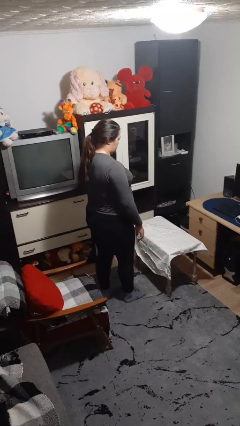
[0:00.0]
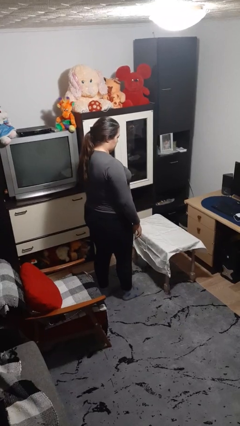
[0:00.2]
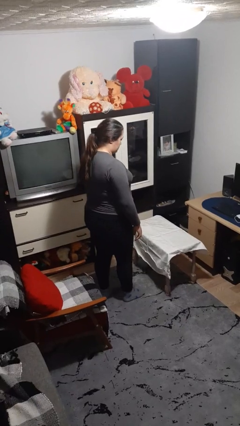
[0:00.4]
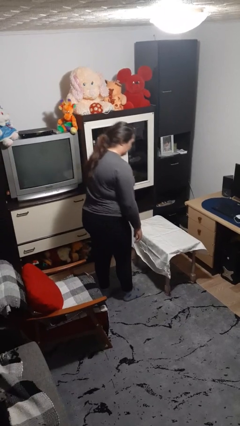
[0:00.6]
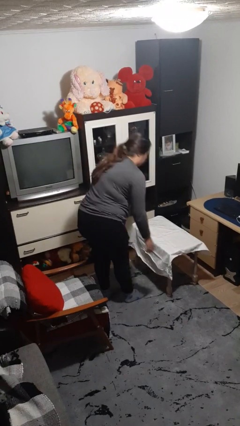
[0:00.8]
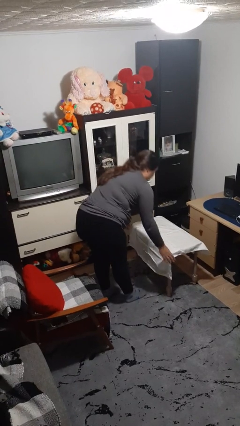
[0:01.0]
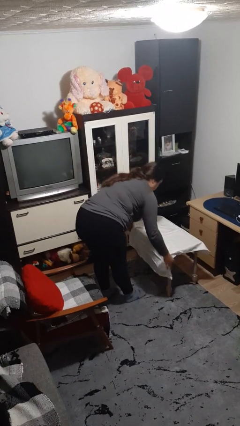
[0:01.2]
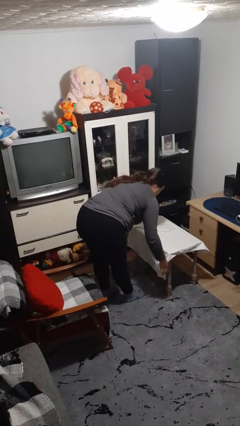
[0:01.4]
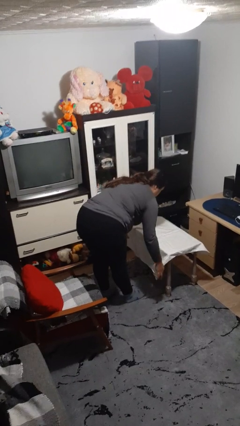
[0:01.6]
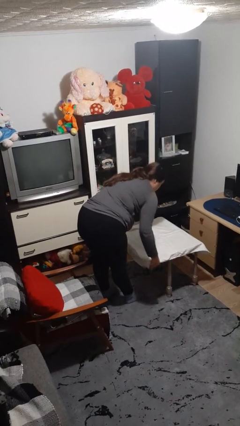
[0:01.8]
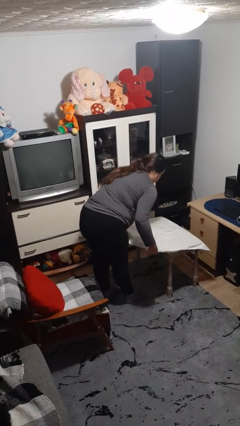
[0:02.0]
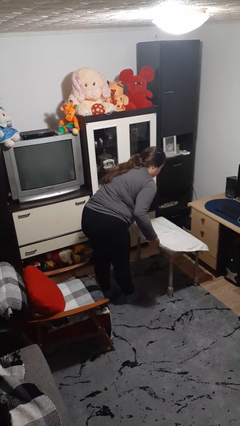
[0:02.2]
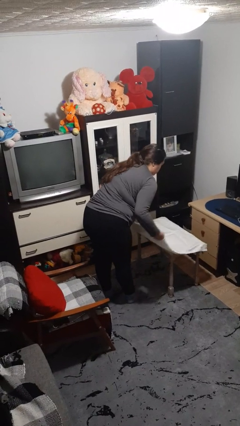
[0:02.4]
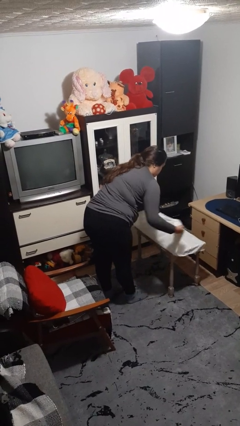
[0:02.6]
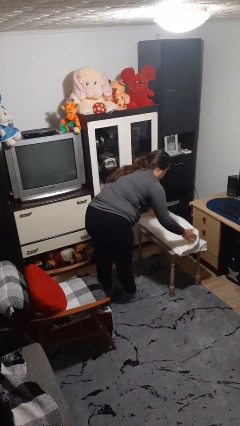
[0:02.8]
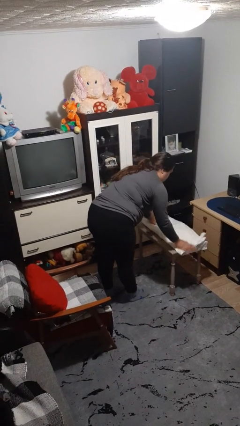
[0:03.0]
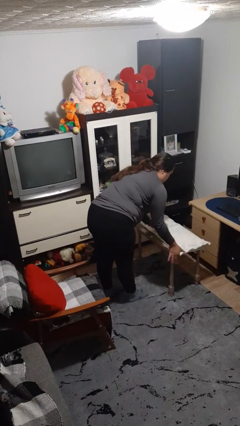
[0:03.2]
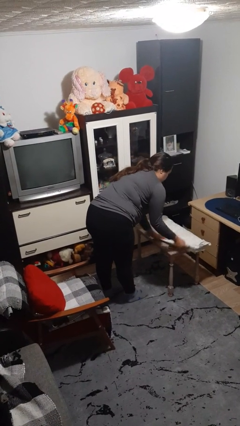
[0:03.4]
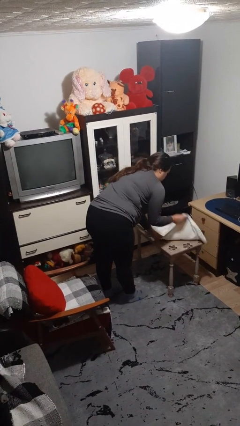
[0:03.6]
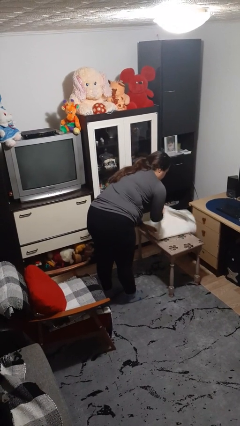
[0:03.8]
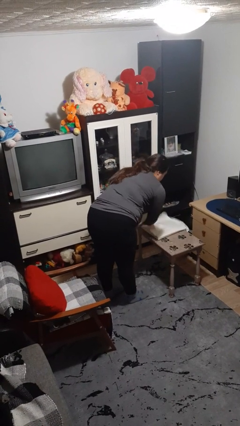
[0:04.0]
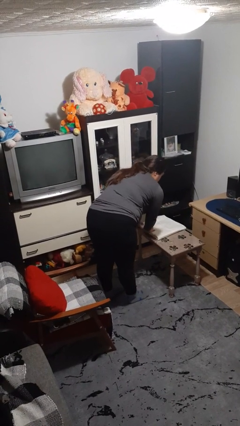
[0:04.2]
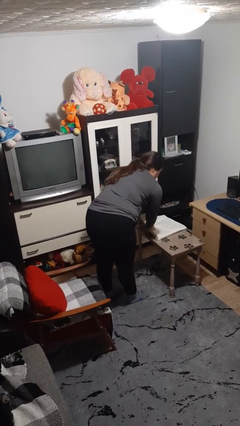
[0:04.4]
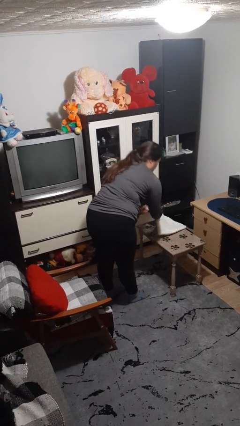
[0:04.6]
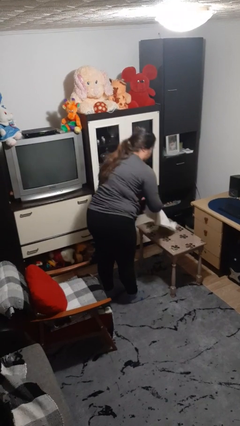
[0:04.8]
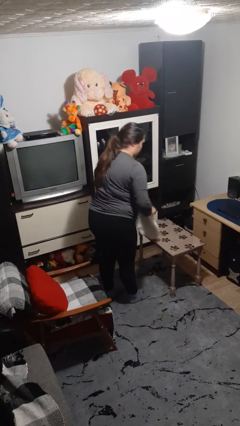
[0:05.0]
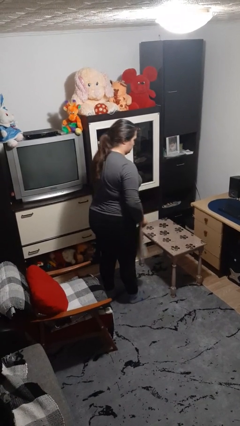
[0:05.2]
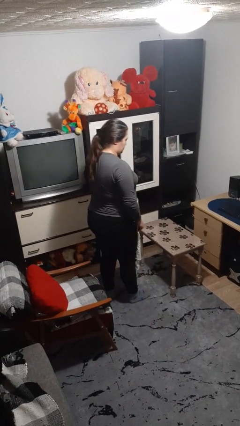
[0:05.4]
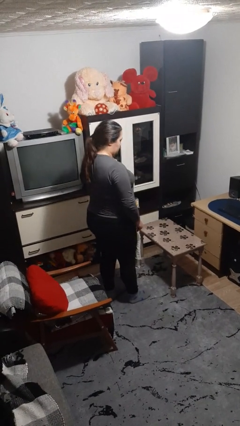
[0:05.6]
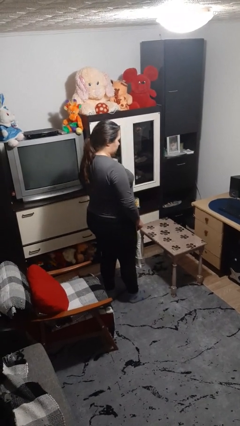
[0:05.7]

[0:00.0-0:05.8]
person folds tablecloth

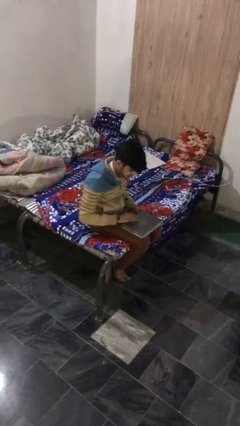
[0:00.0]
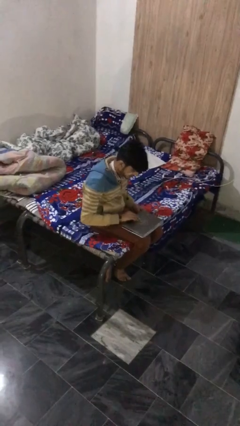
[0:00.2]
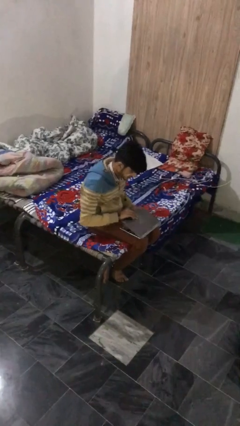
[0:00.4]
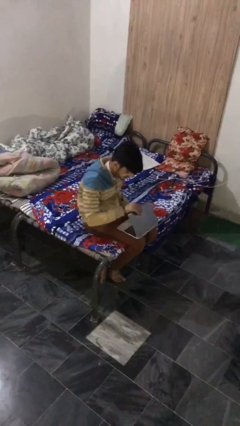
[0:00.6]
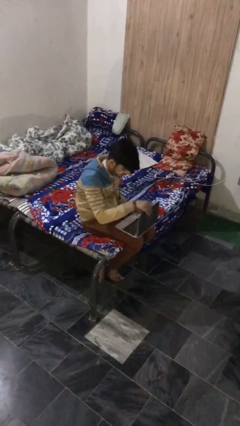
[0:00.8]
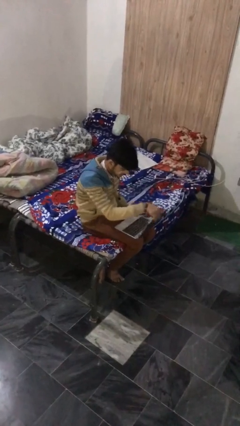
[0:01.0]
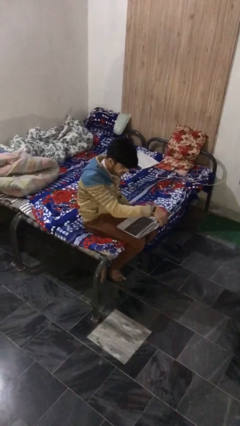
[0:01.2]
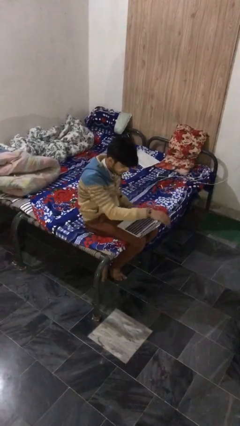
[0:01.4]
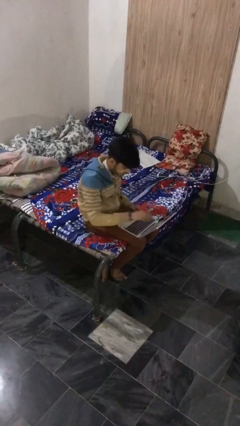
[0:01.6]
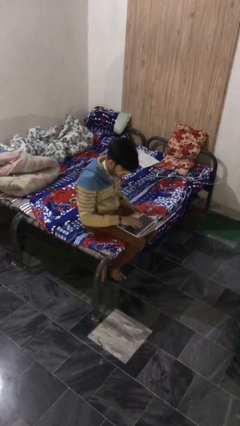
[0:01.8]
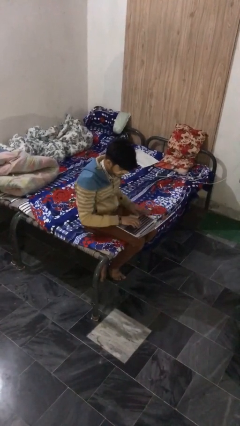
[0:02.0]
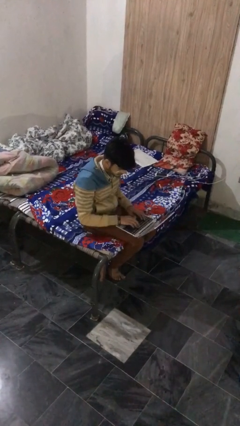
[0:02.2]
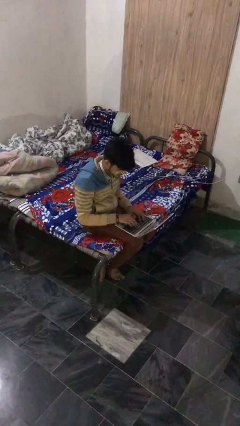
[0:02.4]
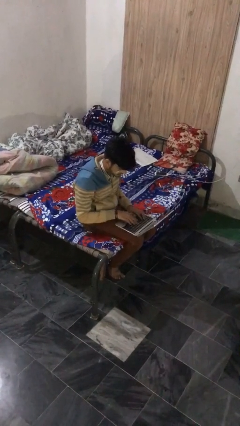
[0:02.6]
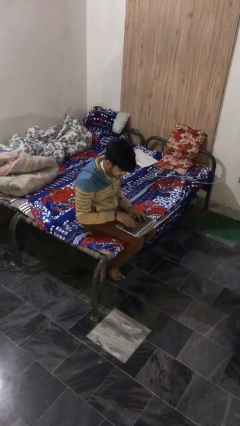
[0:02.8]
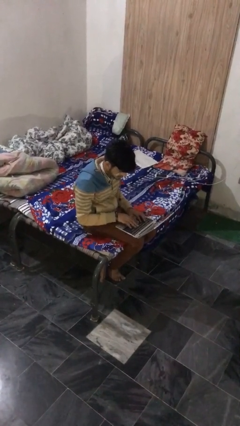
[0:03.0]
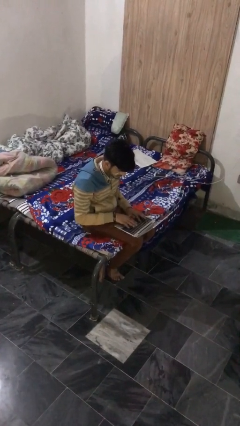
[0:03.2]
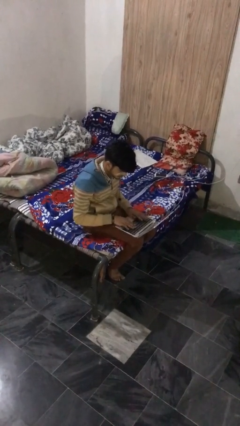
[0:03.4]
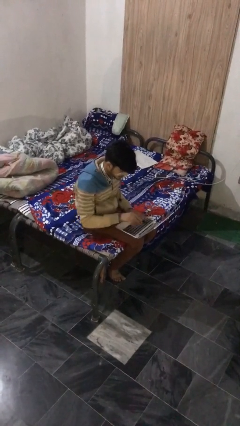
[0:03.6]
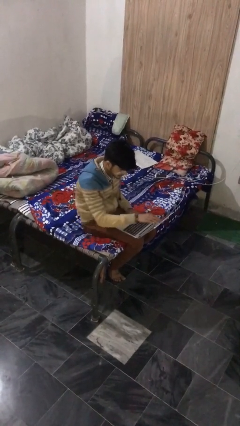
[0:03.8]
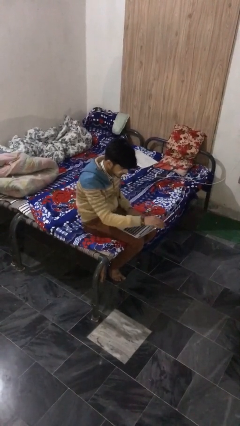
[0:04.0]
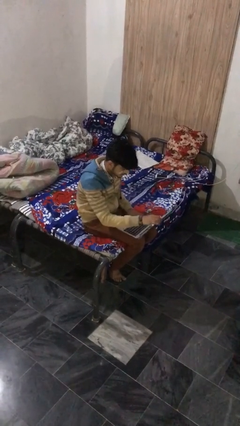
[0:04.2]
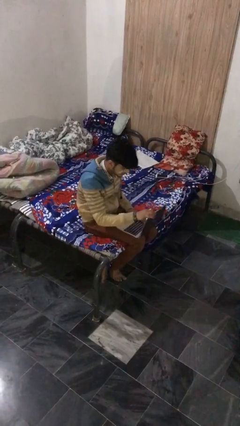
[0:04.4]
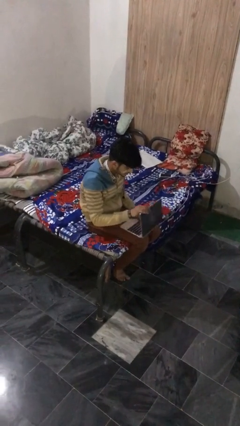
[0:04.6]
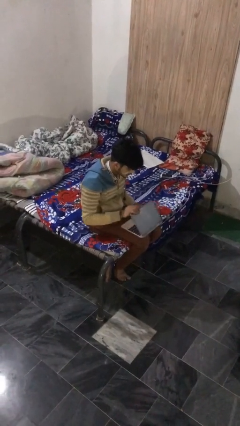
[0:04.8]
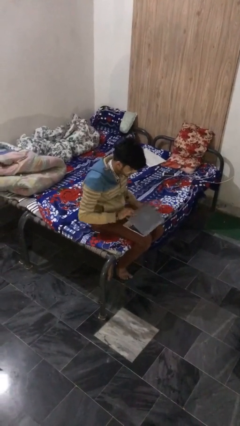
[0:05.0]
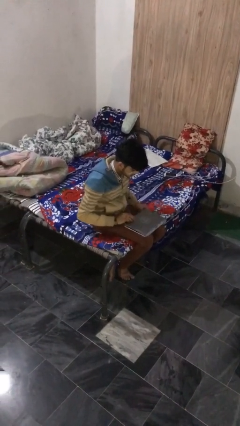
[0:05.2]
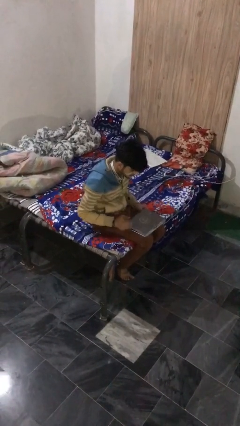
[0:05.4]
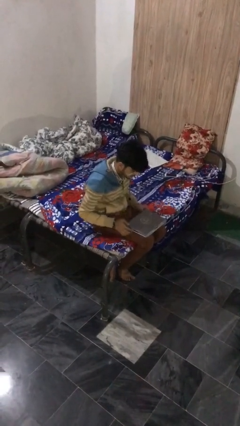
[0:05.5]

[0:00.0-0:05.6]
person interacts with laptop

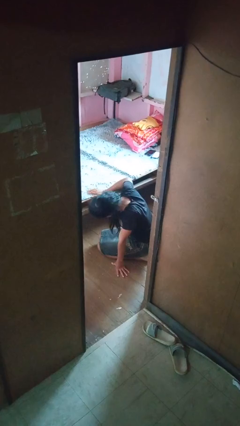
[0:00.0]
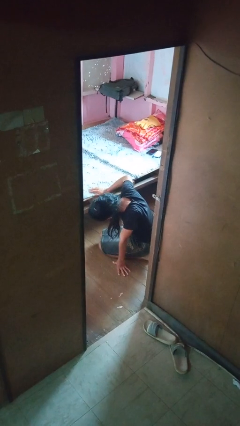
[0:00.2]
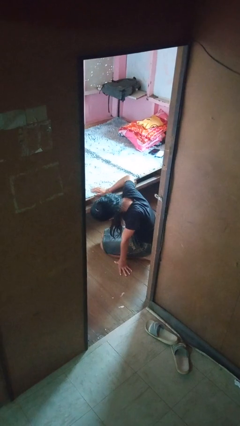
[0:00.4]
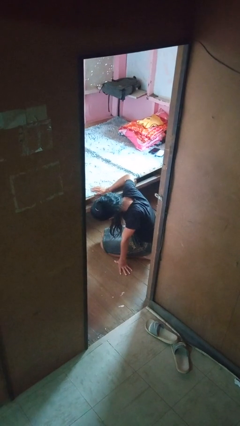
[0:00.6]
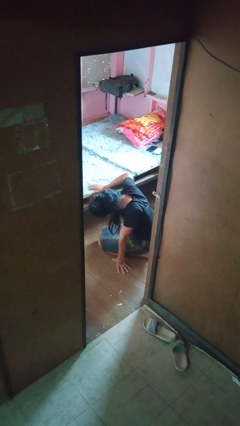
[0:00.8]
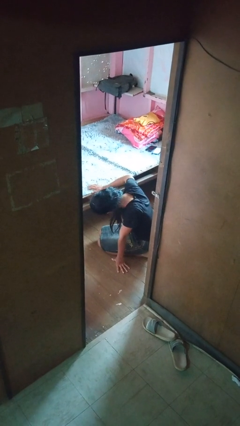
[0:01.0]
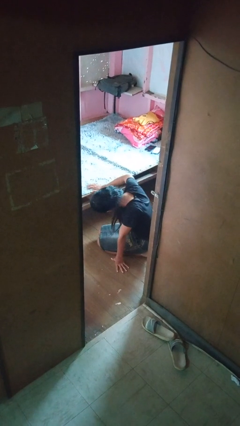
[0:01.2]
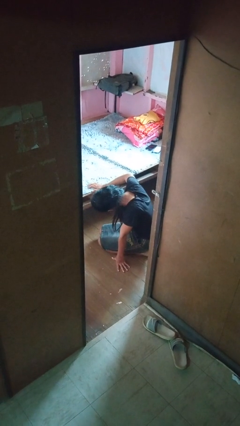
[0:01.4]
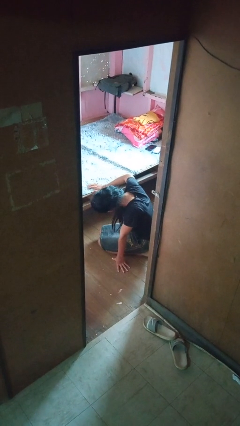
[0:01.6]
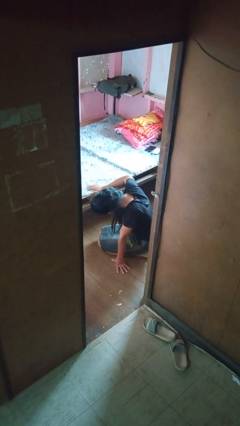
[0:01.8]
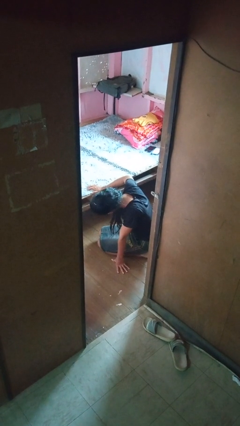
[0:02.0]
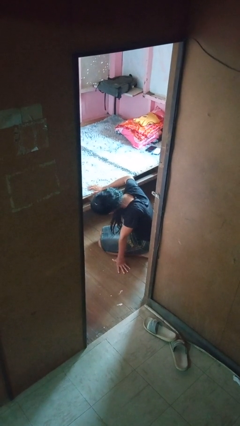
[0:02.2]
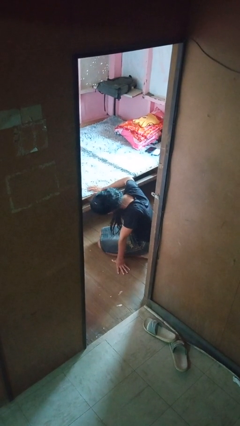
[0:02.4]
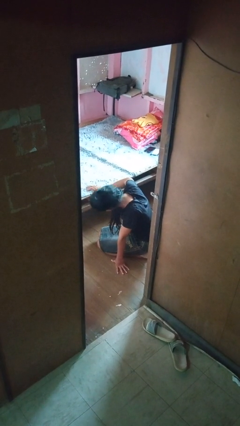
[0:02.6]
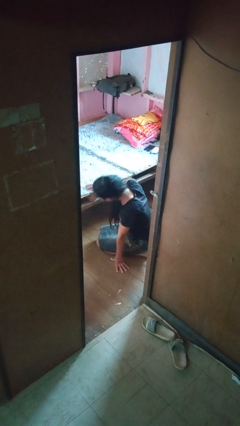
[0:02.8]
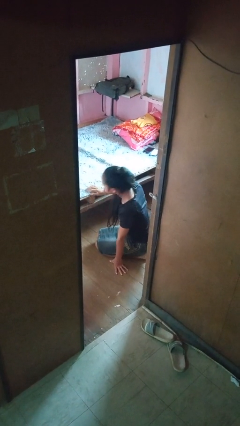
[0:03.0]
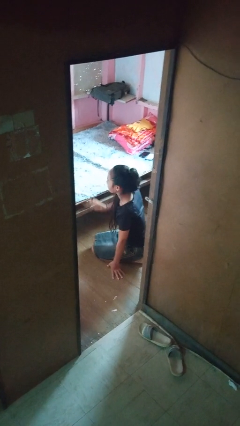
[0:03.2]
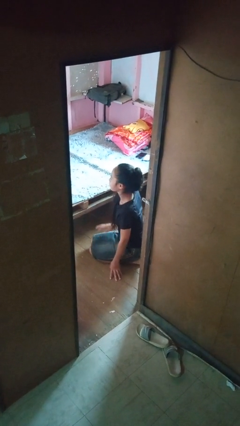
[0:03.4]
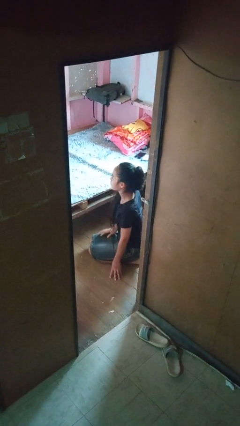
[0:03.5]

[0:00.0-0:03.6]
person searches under bed

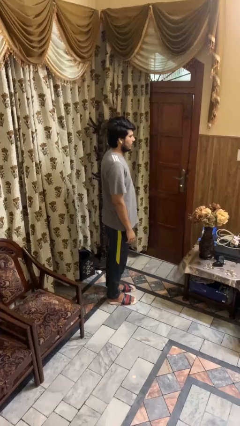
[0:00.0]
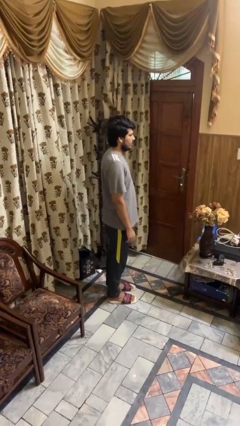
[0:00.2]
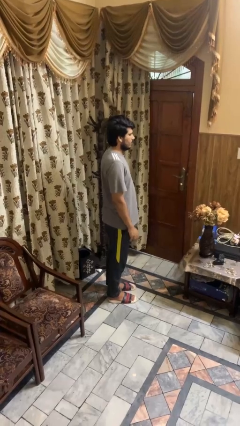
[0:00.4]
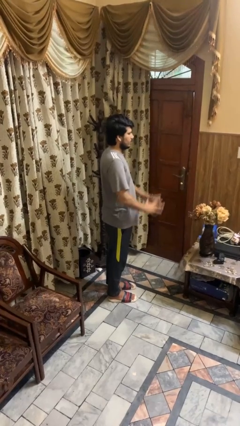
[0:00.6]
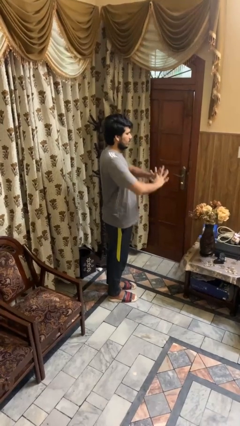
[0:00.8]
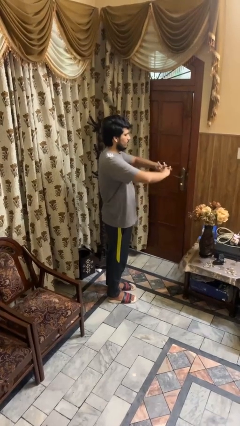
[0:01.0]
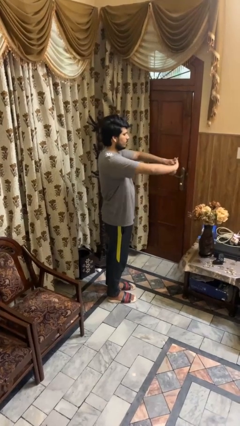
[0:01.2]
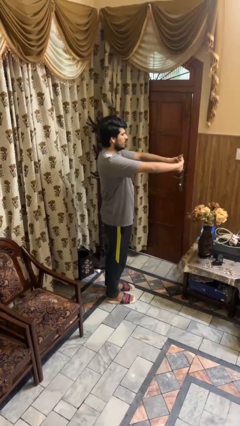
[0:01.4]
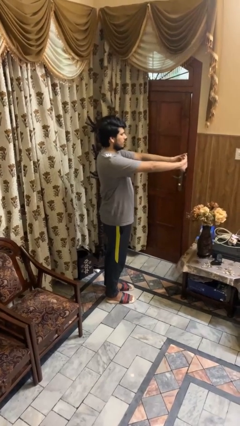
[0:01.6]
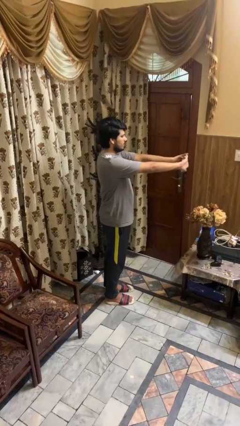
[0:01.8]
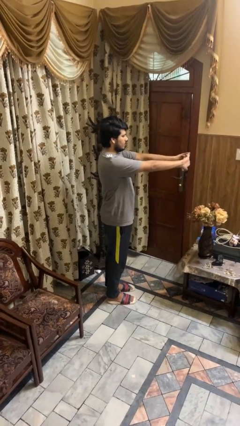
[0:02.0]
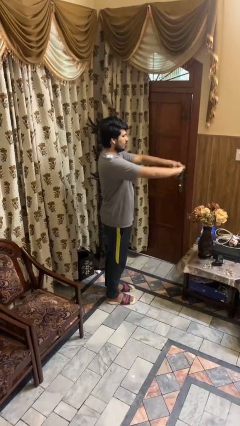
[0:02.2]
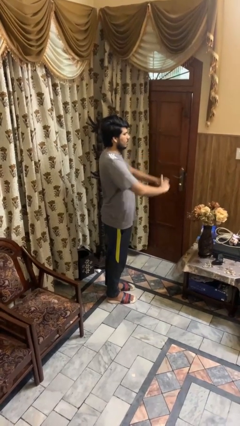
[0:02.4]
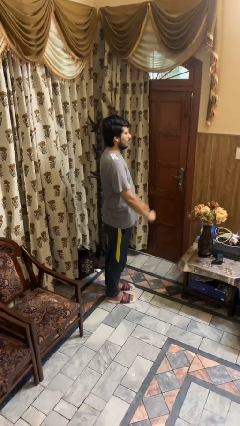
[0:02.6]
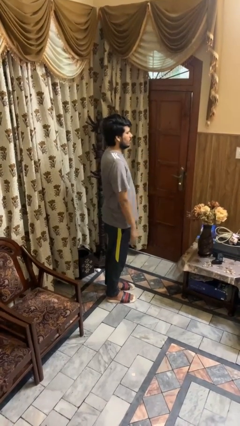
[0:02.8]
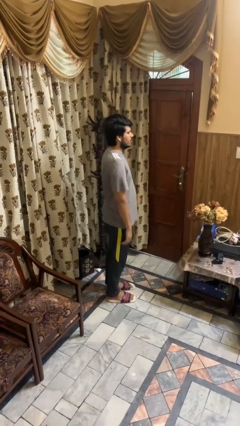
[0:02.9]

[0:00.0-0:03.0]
person cracks knuckles
